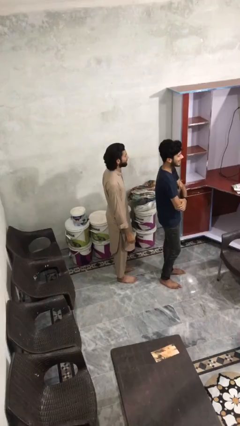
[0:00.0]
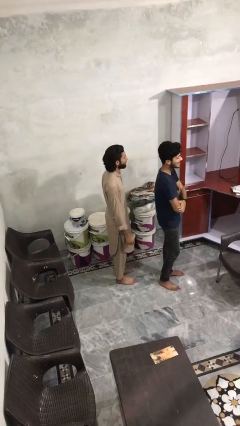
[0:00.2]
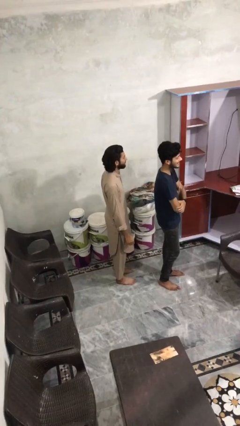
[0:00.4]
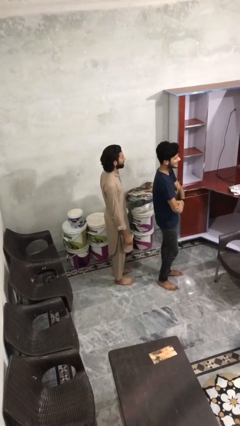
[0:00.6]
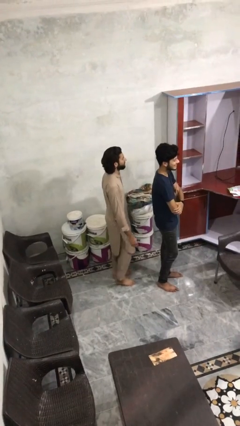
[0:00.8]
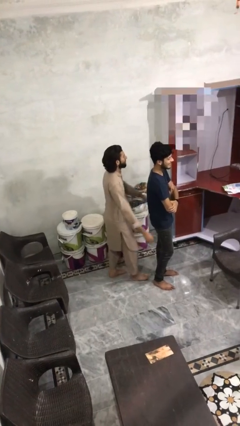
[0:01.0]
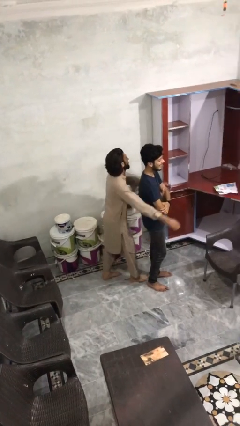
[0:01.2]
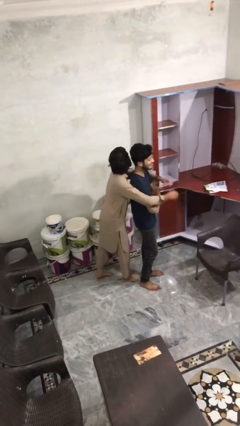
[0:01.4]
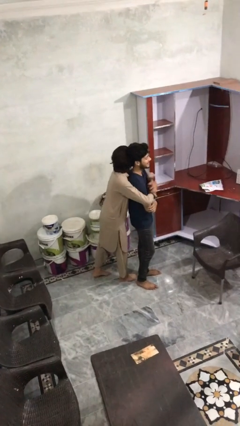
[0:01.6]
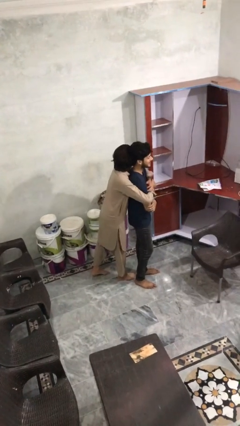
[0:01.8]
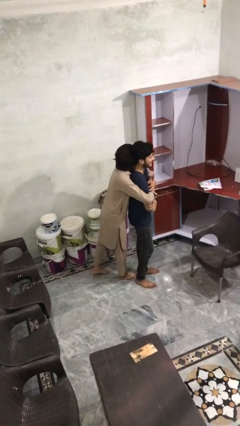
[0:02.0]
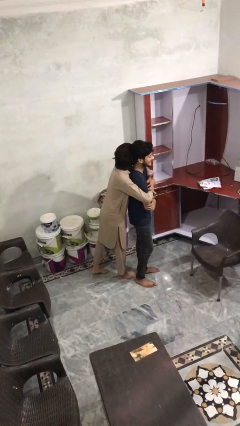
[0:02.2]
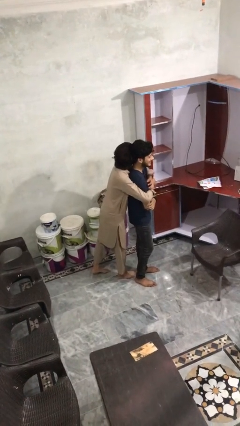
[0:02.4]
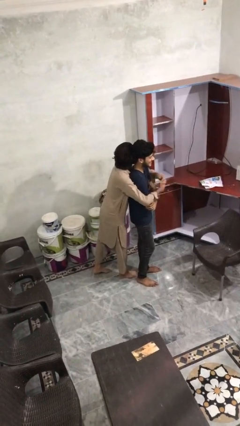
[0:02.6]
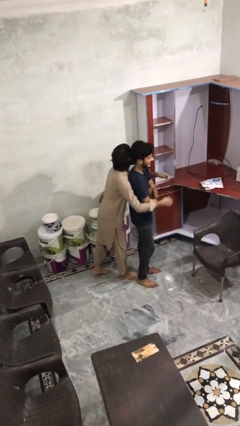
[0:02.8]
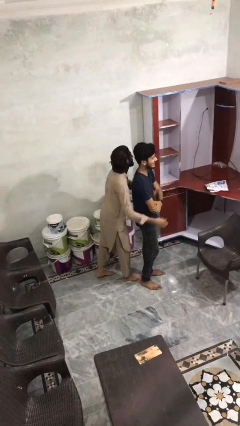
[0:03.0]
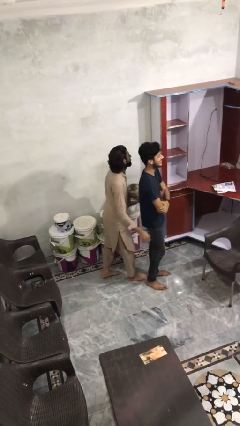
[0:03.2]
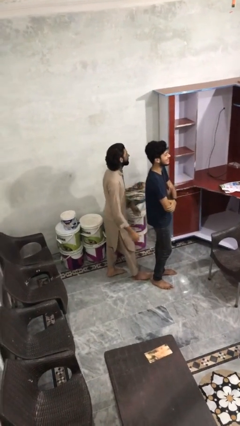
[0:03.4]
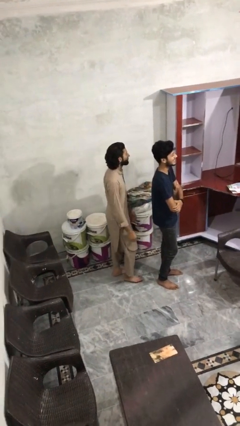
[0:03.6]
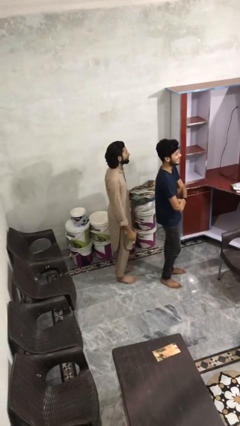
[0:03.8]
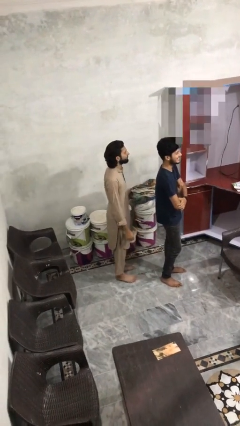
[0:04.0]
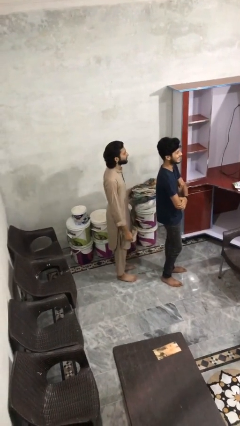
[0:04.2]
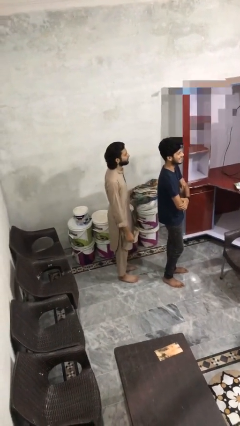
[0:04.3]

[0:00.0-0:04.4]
person hugs person from behind

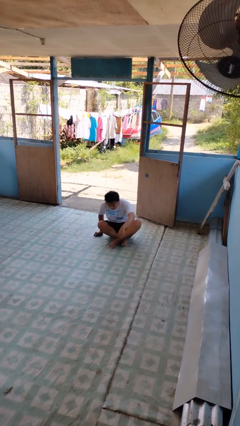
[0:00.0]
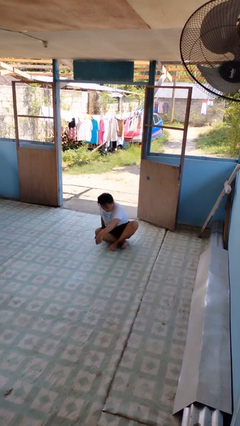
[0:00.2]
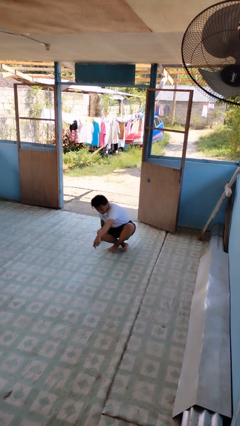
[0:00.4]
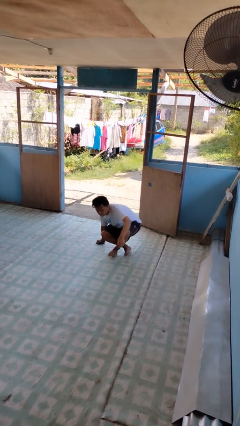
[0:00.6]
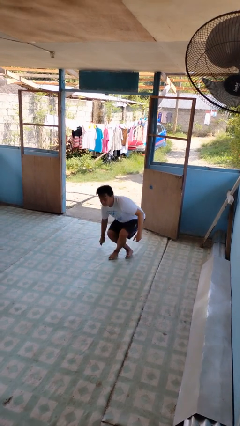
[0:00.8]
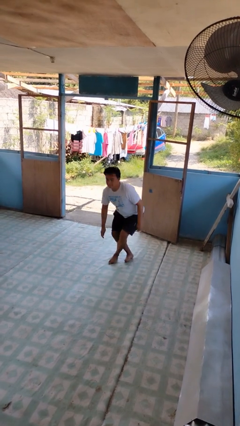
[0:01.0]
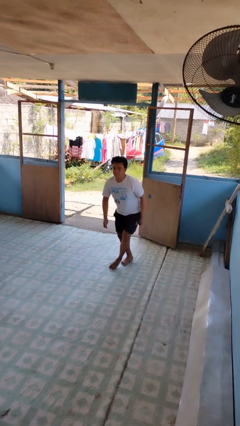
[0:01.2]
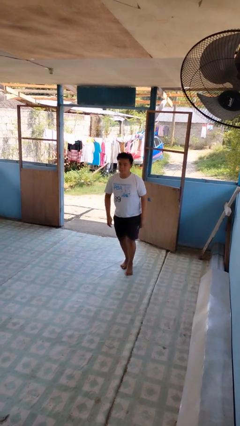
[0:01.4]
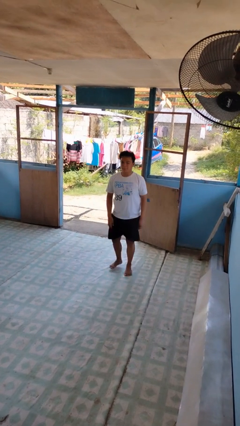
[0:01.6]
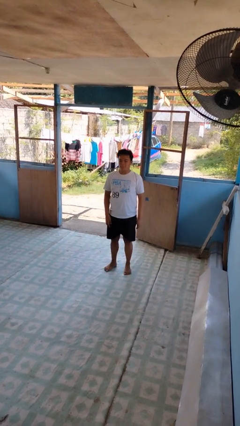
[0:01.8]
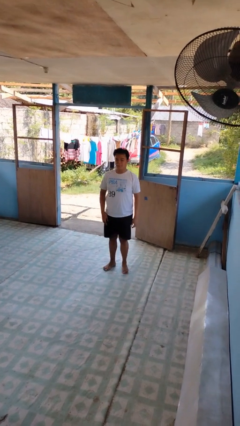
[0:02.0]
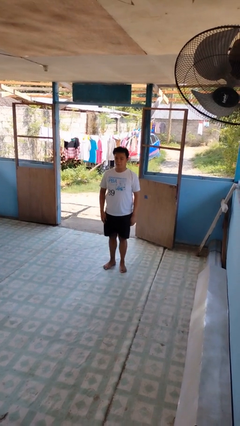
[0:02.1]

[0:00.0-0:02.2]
person stands up from floor

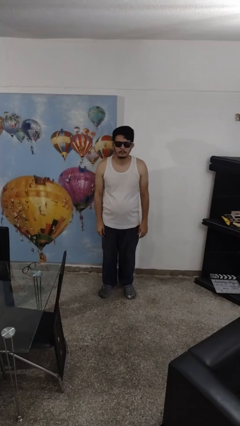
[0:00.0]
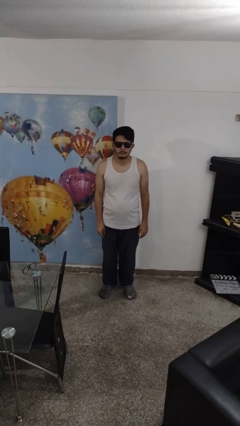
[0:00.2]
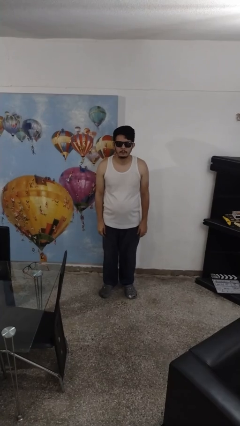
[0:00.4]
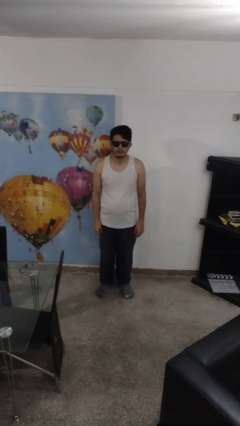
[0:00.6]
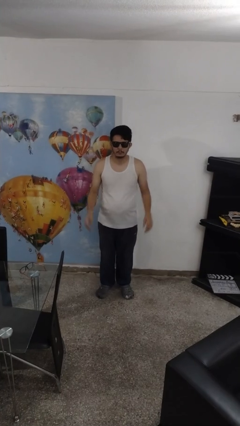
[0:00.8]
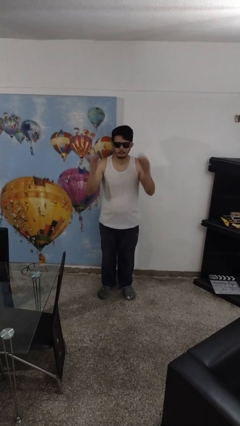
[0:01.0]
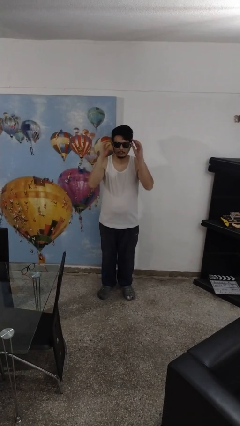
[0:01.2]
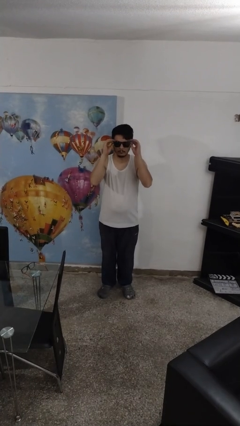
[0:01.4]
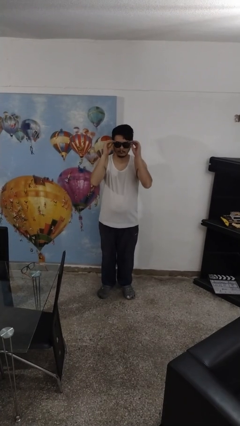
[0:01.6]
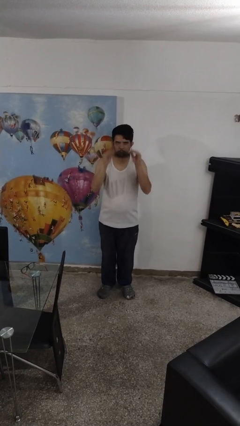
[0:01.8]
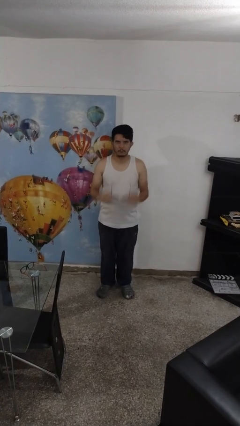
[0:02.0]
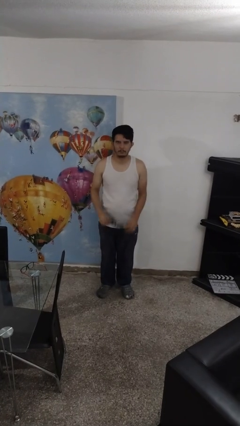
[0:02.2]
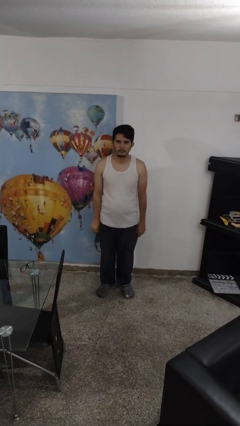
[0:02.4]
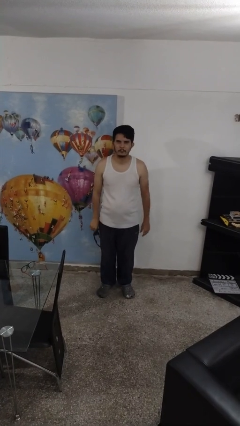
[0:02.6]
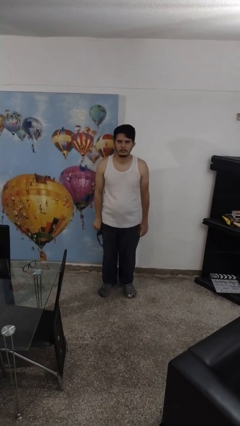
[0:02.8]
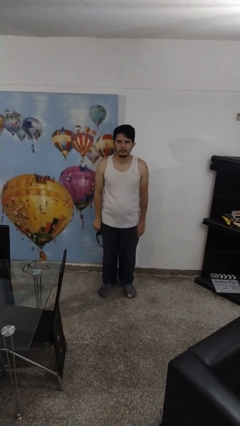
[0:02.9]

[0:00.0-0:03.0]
person takes off sunglasses

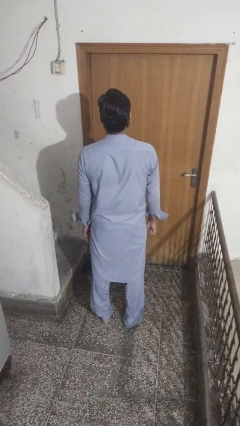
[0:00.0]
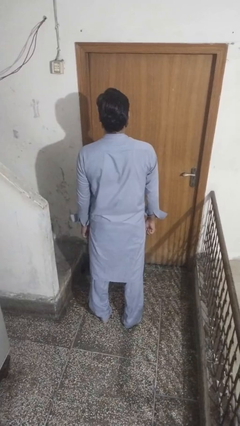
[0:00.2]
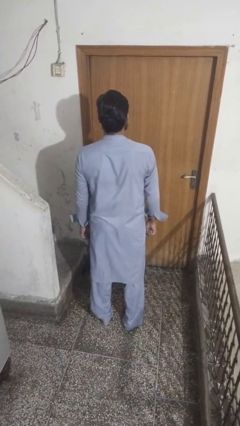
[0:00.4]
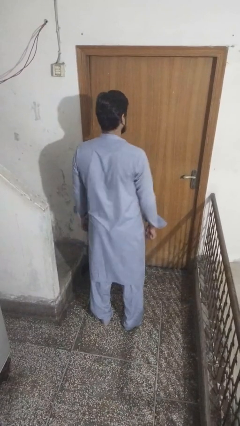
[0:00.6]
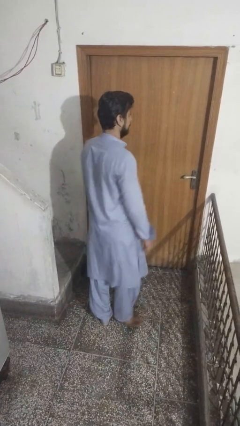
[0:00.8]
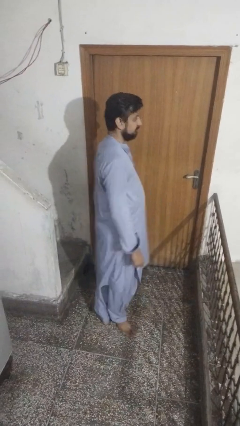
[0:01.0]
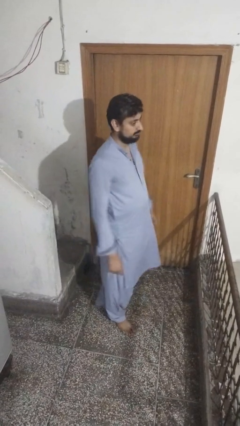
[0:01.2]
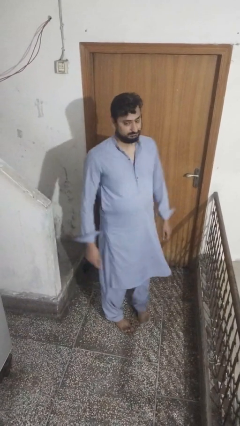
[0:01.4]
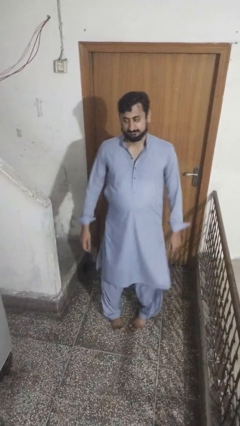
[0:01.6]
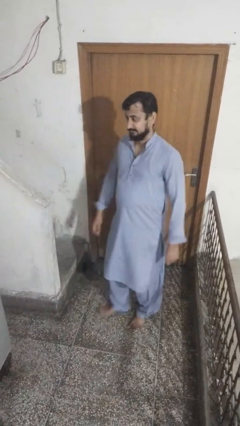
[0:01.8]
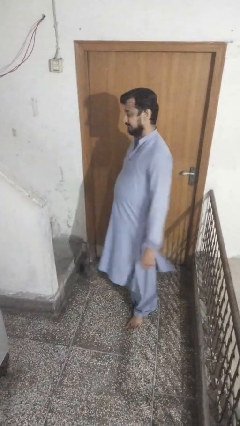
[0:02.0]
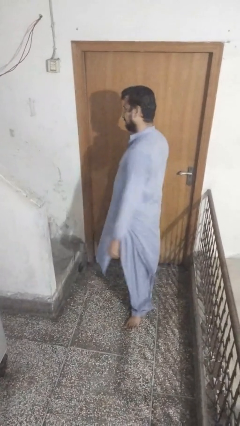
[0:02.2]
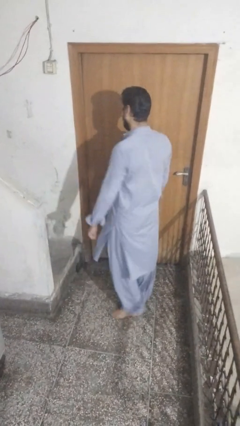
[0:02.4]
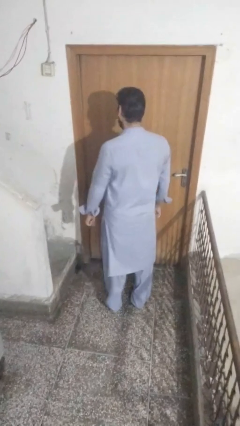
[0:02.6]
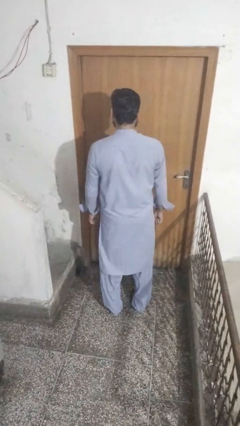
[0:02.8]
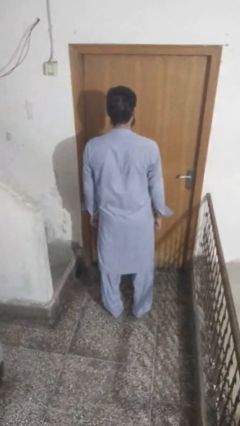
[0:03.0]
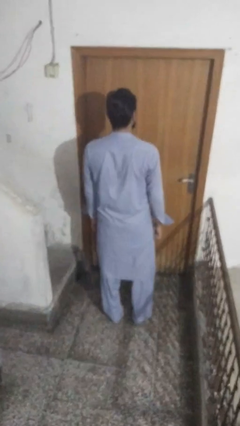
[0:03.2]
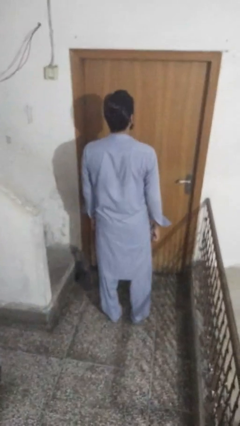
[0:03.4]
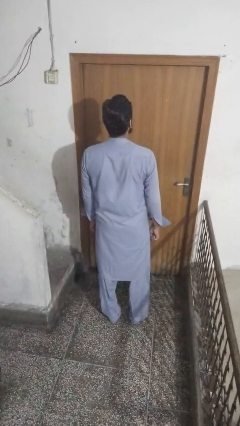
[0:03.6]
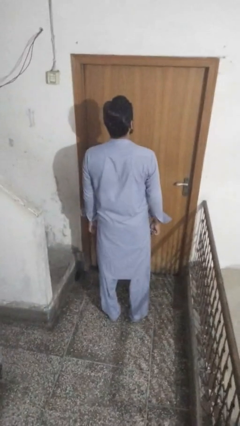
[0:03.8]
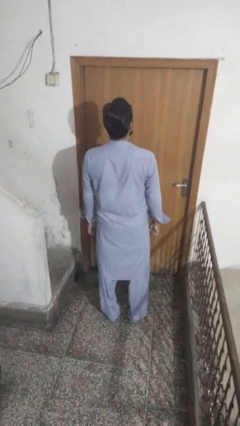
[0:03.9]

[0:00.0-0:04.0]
person twirls

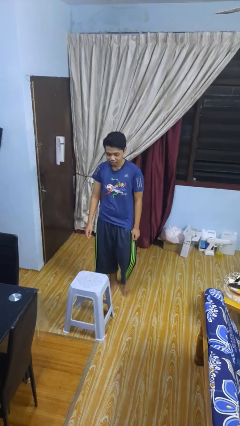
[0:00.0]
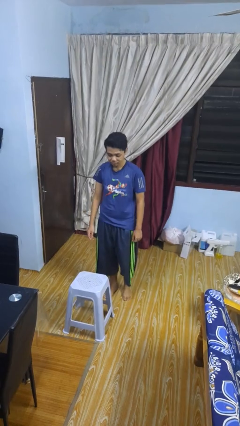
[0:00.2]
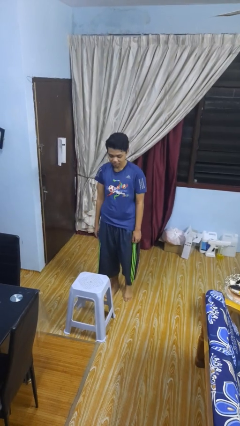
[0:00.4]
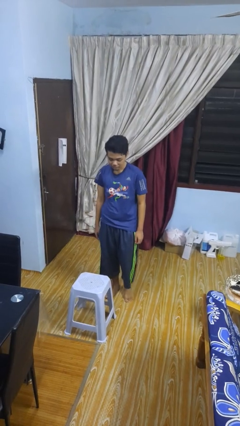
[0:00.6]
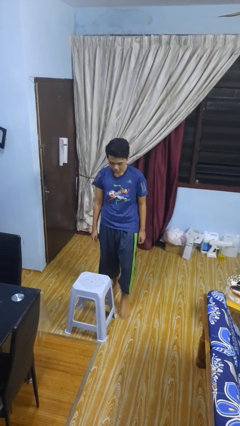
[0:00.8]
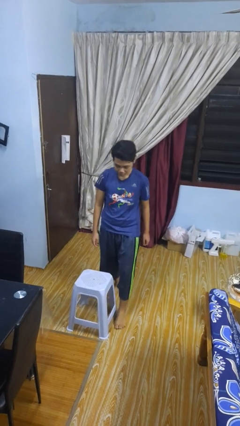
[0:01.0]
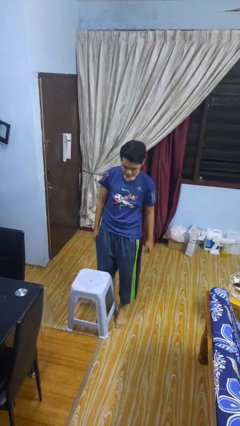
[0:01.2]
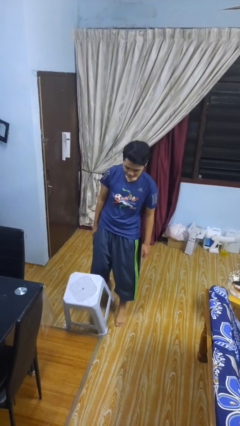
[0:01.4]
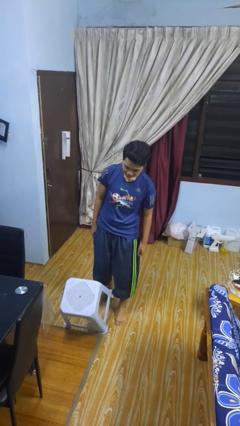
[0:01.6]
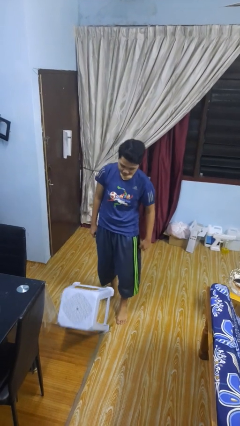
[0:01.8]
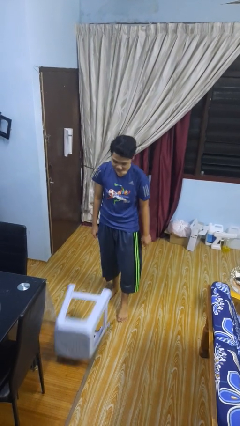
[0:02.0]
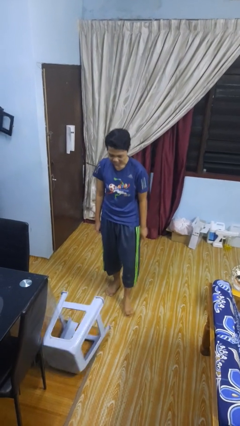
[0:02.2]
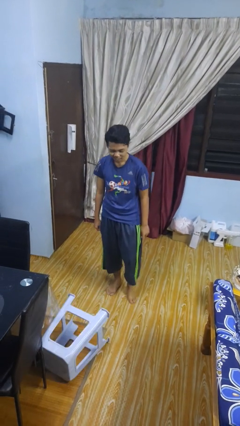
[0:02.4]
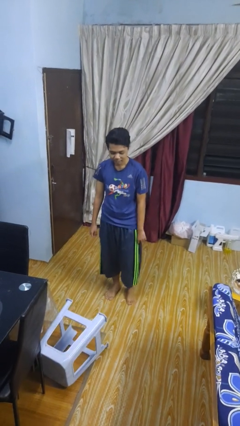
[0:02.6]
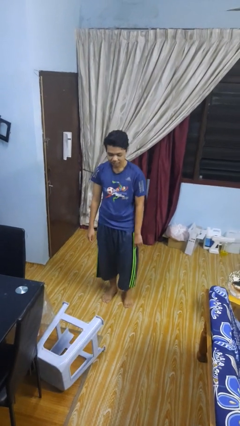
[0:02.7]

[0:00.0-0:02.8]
person knocks over furniture

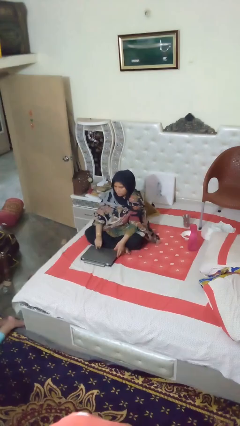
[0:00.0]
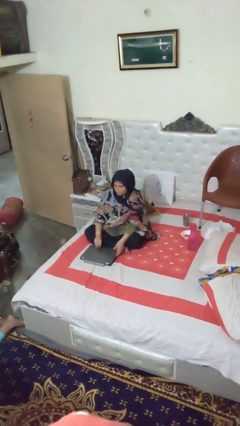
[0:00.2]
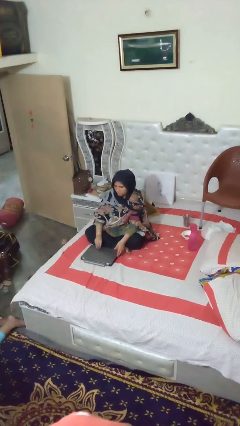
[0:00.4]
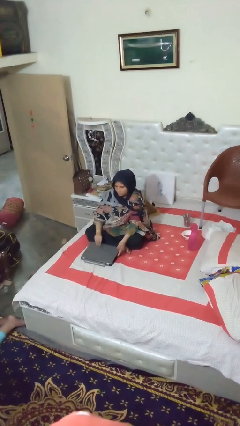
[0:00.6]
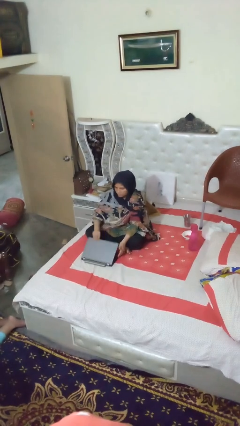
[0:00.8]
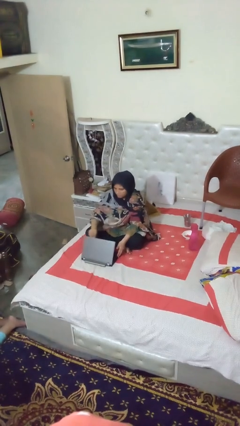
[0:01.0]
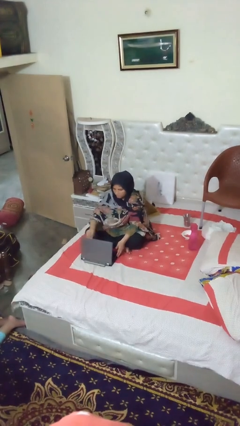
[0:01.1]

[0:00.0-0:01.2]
person opens laptop
